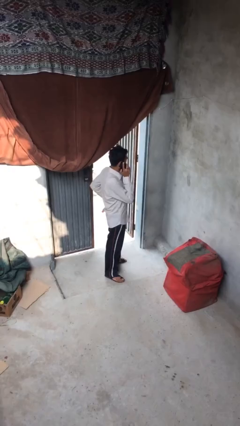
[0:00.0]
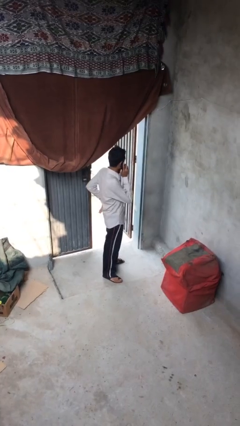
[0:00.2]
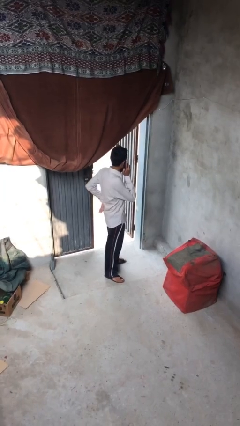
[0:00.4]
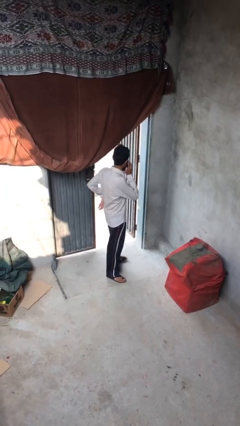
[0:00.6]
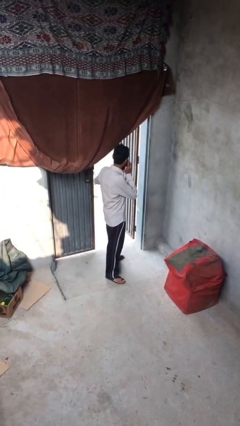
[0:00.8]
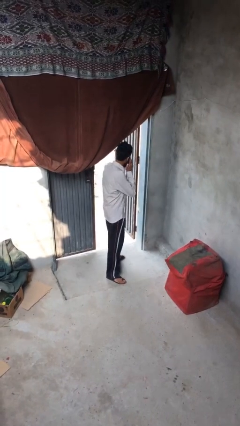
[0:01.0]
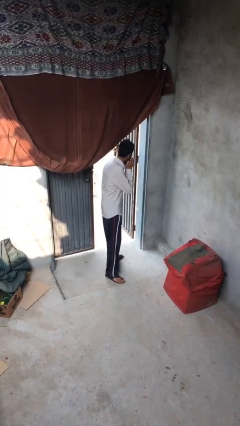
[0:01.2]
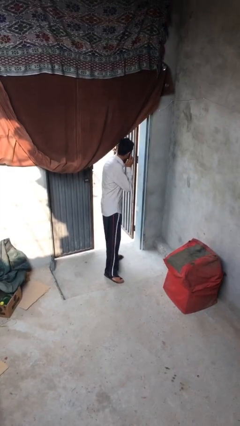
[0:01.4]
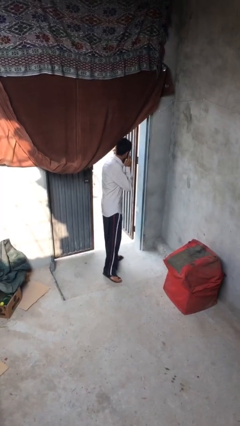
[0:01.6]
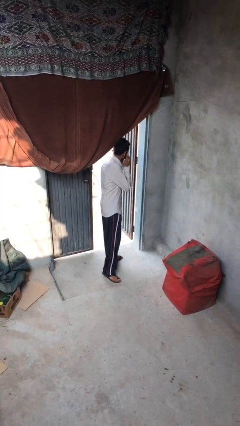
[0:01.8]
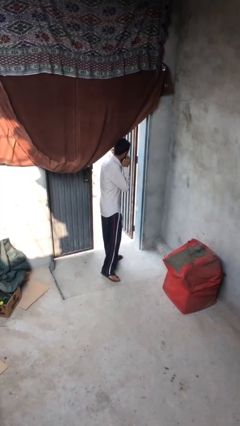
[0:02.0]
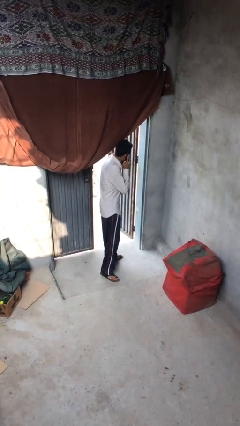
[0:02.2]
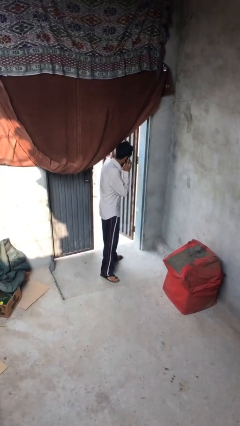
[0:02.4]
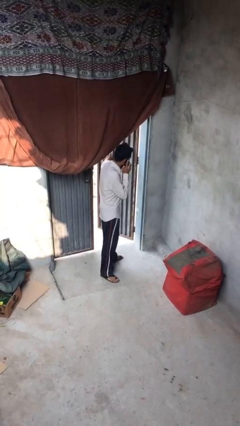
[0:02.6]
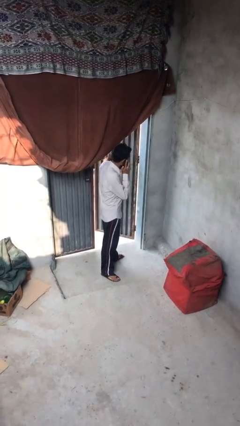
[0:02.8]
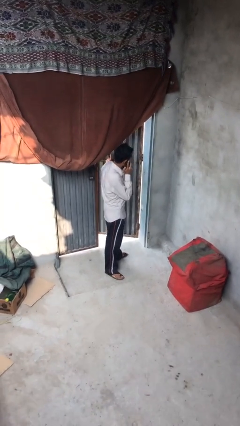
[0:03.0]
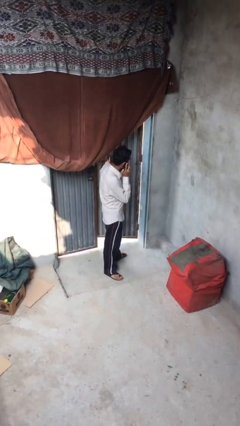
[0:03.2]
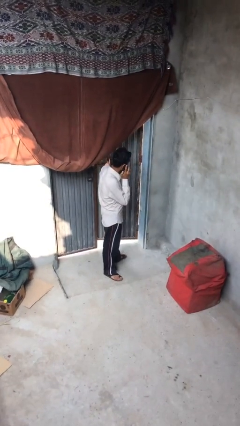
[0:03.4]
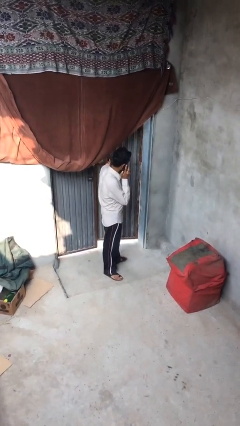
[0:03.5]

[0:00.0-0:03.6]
person closes facility door

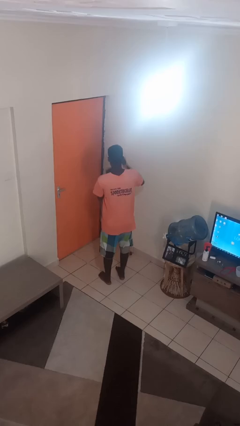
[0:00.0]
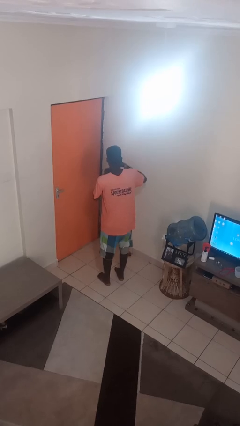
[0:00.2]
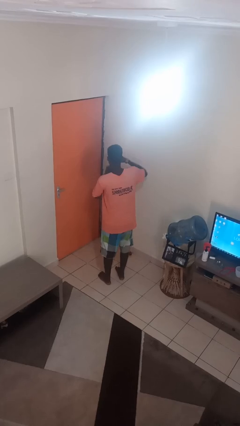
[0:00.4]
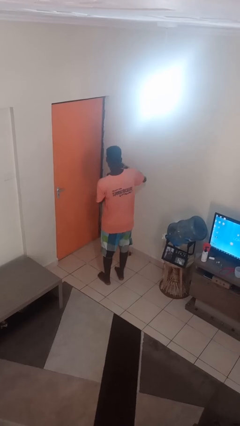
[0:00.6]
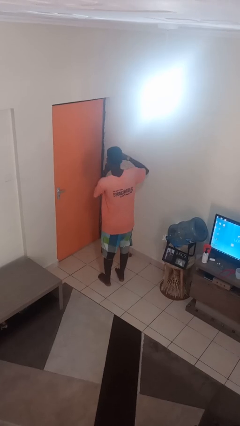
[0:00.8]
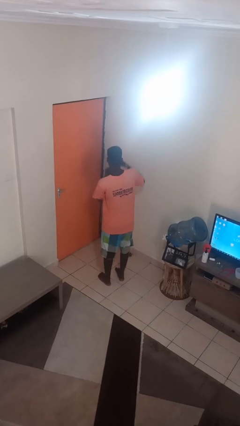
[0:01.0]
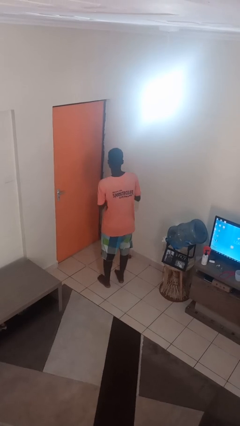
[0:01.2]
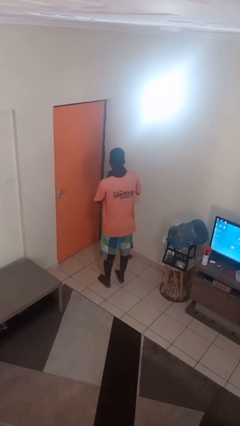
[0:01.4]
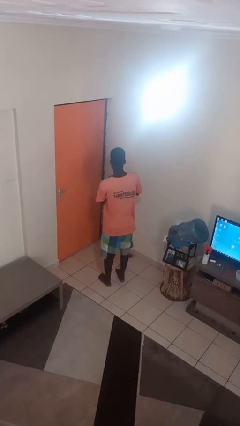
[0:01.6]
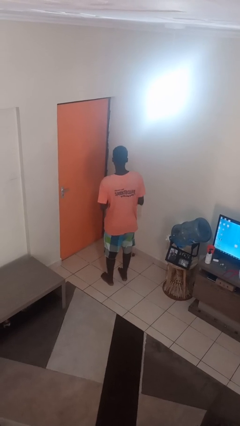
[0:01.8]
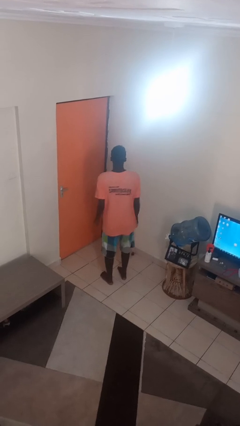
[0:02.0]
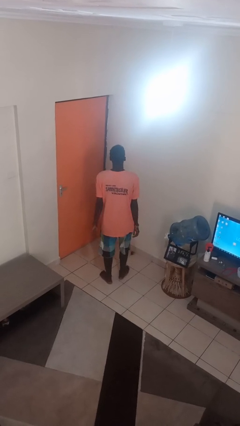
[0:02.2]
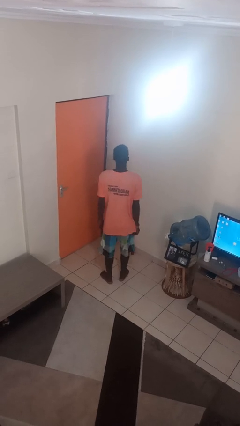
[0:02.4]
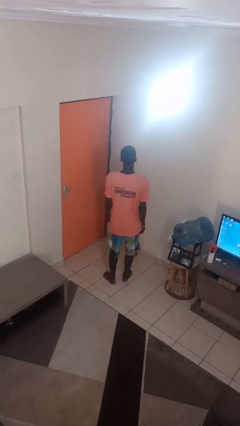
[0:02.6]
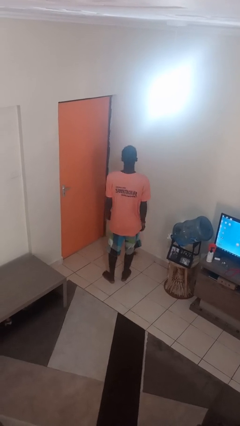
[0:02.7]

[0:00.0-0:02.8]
person snaps fingers

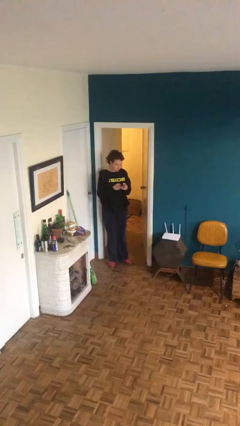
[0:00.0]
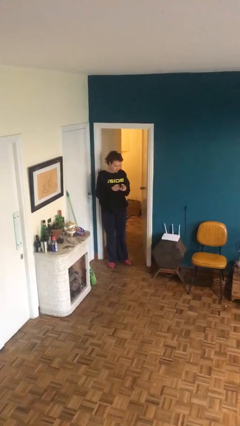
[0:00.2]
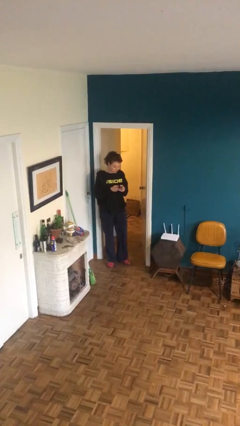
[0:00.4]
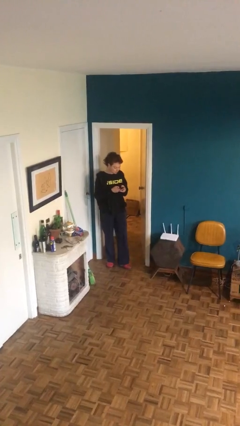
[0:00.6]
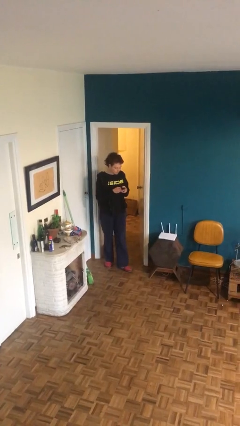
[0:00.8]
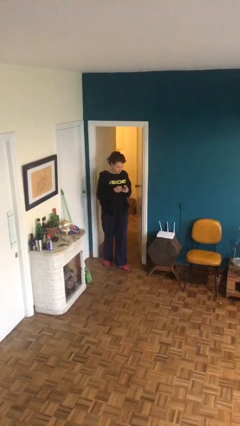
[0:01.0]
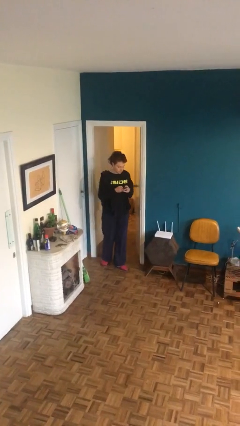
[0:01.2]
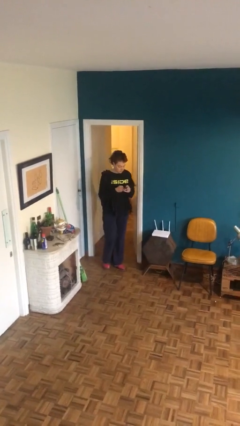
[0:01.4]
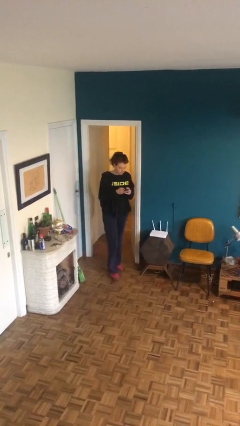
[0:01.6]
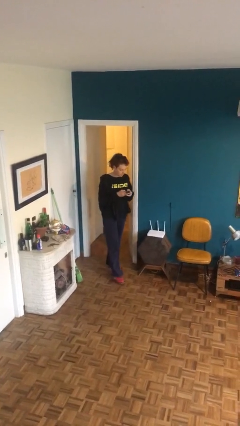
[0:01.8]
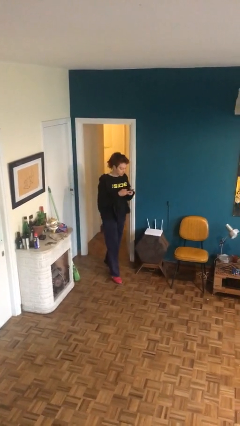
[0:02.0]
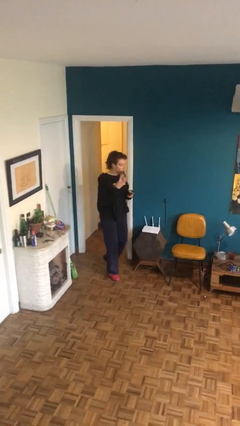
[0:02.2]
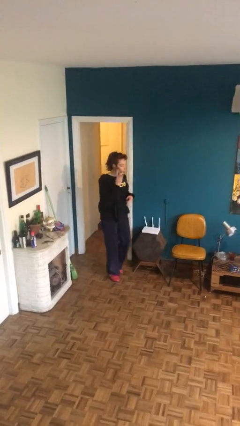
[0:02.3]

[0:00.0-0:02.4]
person texts on phone

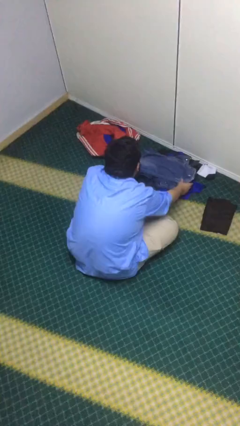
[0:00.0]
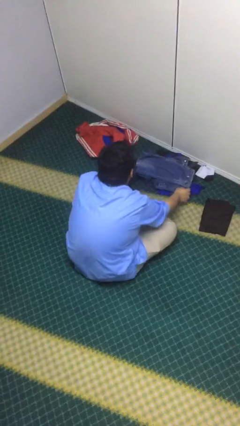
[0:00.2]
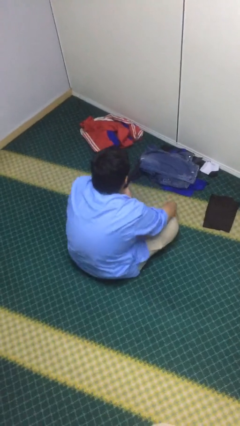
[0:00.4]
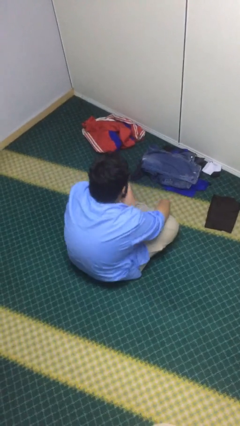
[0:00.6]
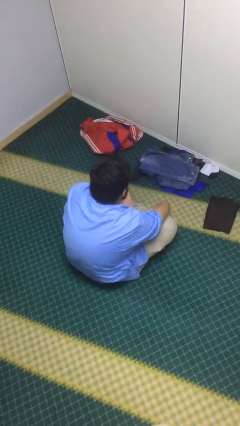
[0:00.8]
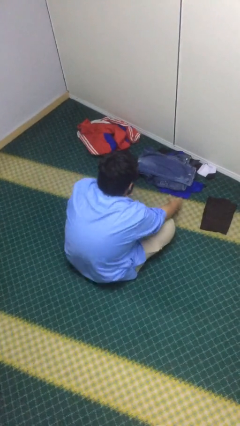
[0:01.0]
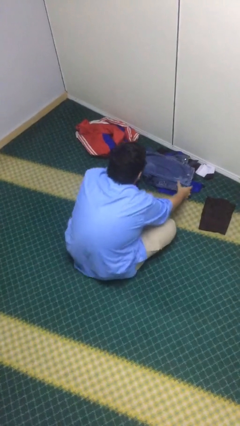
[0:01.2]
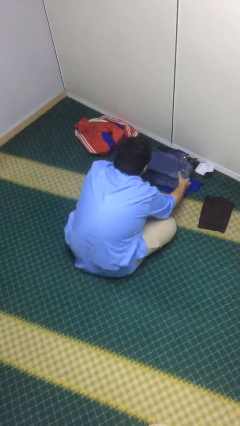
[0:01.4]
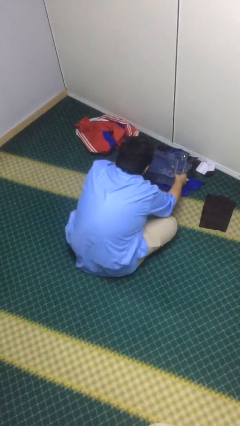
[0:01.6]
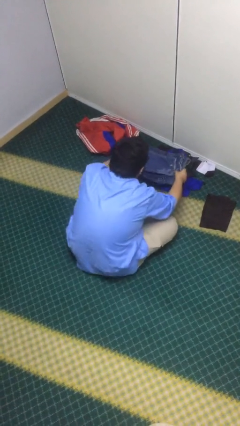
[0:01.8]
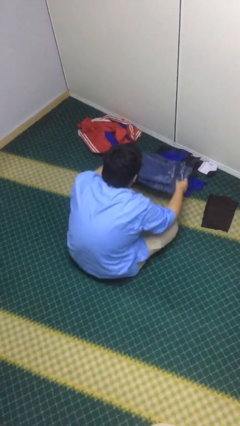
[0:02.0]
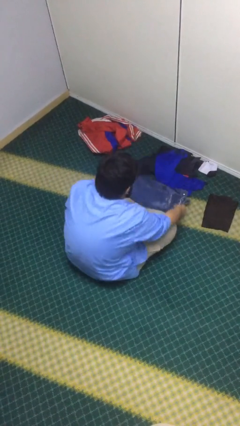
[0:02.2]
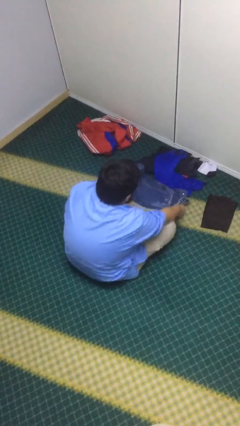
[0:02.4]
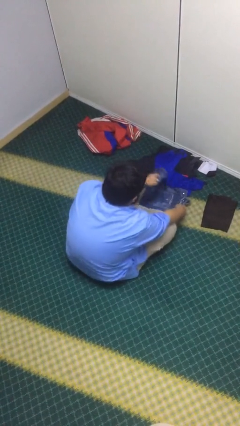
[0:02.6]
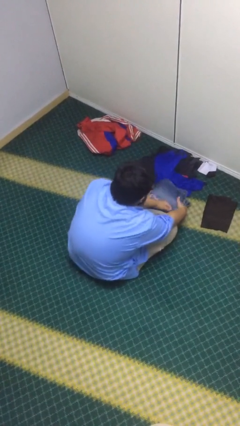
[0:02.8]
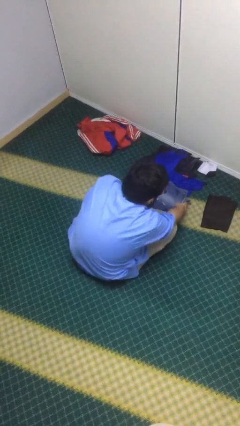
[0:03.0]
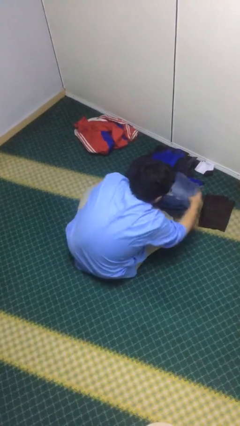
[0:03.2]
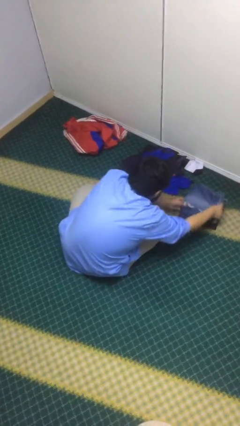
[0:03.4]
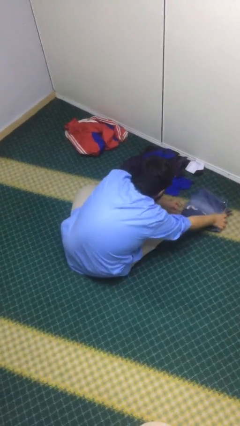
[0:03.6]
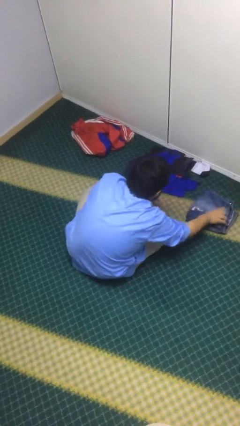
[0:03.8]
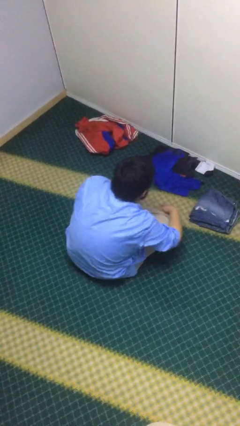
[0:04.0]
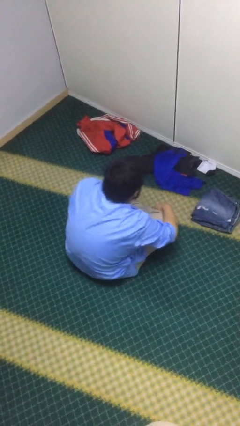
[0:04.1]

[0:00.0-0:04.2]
person folds pants

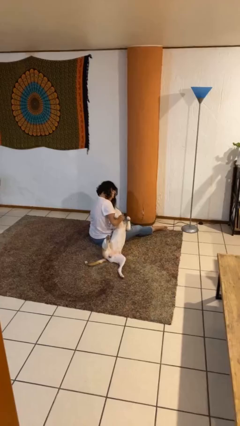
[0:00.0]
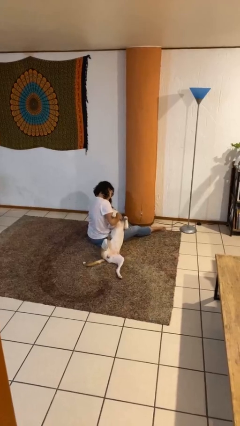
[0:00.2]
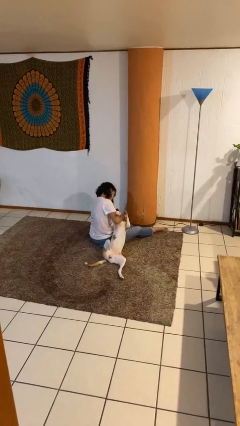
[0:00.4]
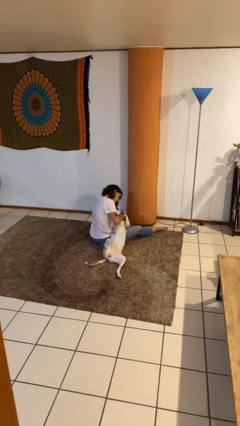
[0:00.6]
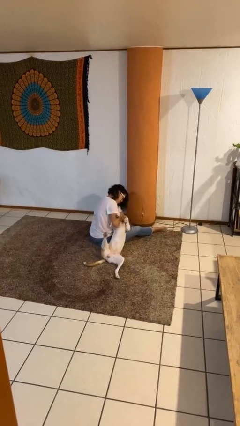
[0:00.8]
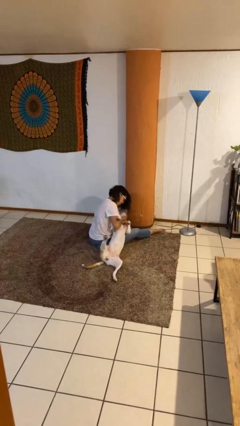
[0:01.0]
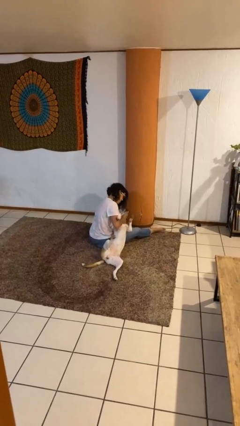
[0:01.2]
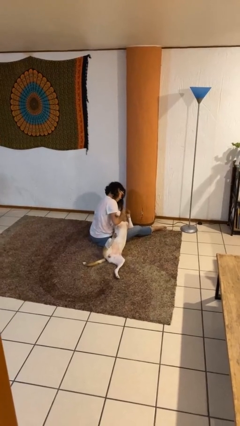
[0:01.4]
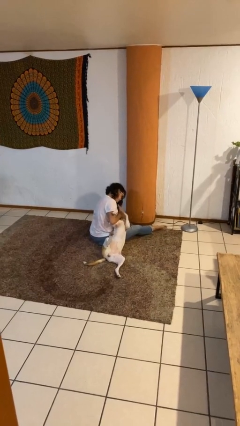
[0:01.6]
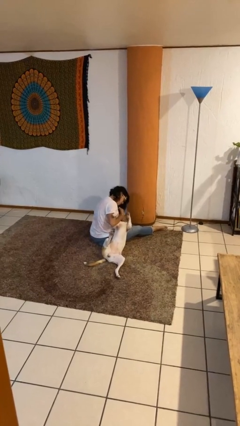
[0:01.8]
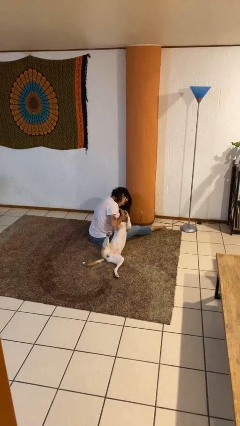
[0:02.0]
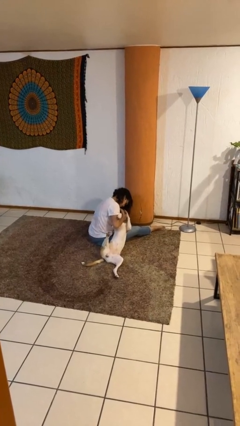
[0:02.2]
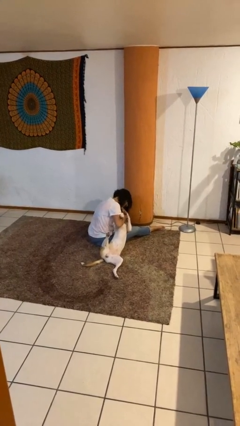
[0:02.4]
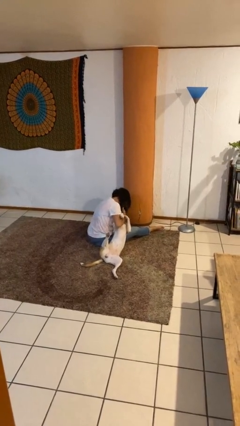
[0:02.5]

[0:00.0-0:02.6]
person hugs dog

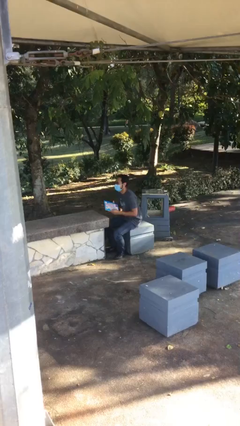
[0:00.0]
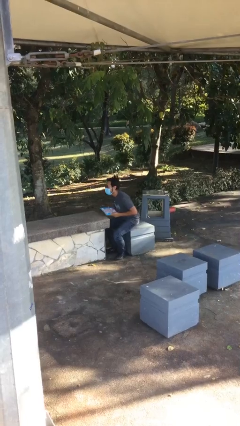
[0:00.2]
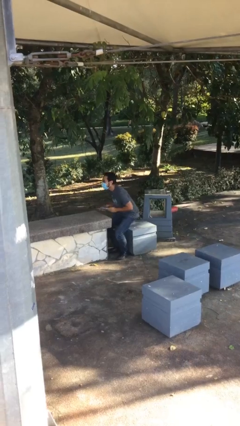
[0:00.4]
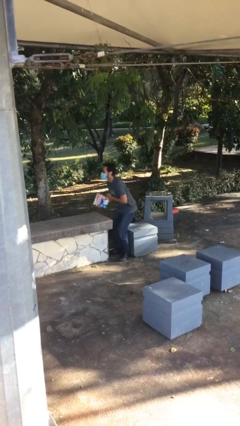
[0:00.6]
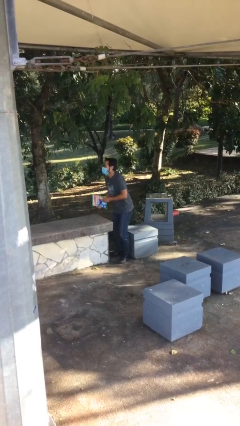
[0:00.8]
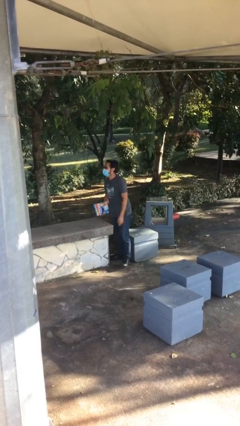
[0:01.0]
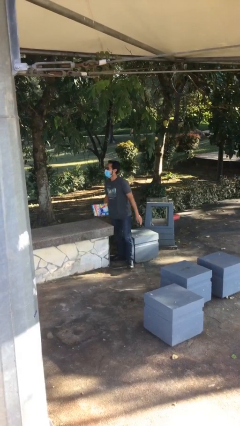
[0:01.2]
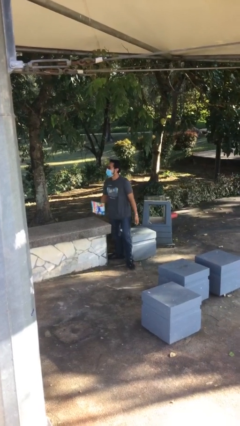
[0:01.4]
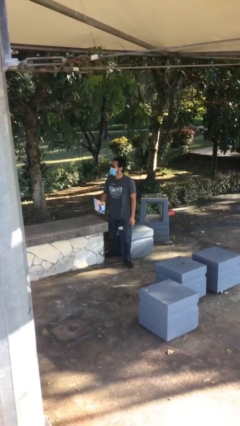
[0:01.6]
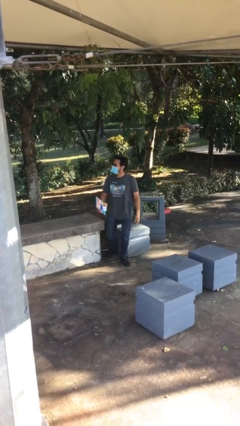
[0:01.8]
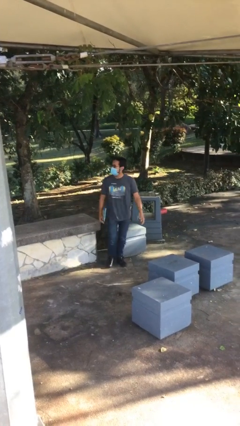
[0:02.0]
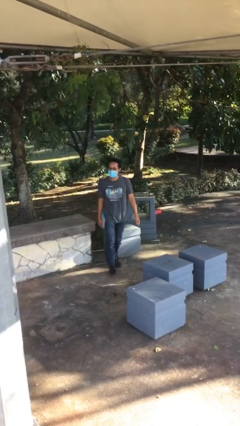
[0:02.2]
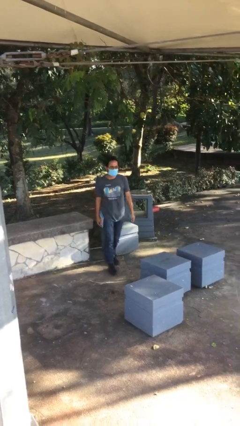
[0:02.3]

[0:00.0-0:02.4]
person stands up
